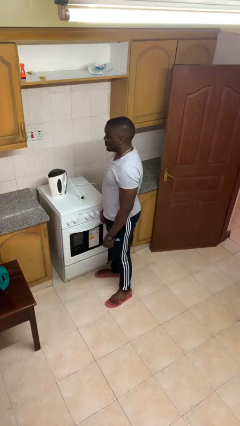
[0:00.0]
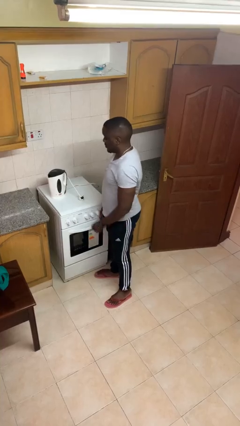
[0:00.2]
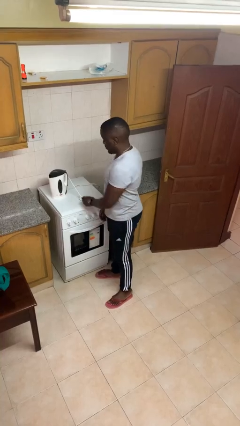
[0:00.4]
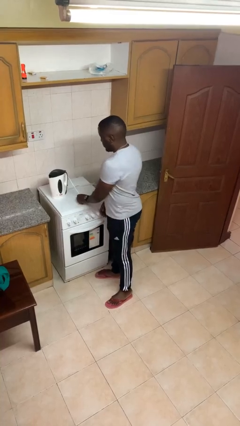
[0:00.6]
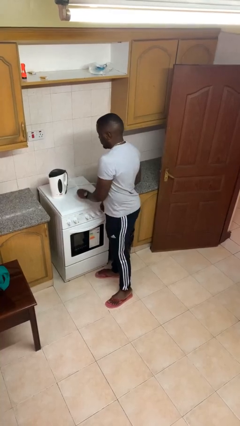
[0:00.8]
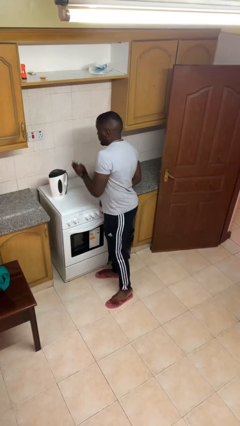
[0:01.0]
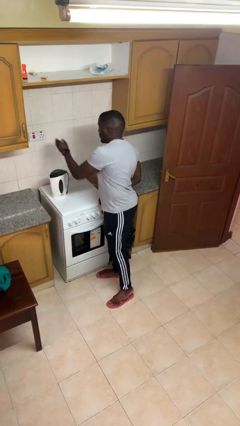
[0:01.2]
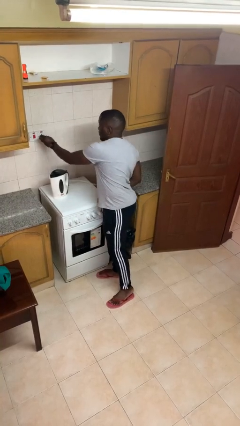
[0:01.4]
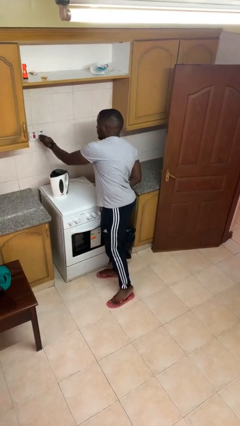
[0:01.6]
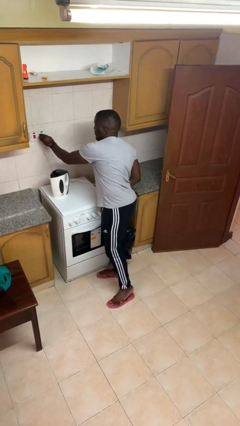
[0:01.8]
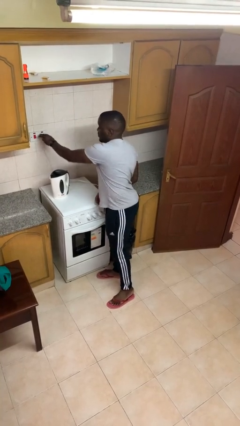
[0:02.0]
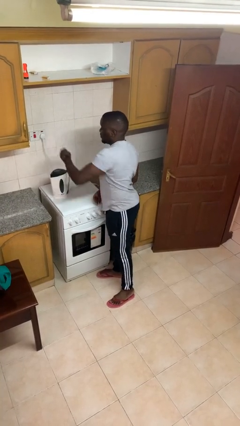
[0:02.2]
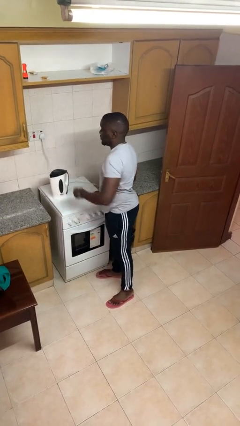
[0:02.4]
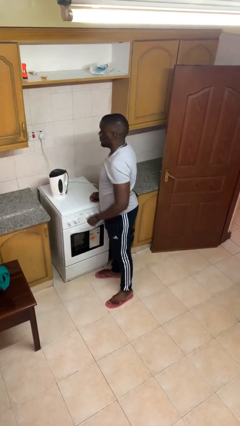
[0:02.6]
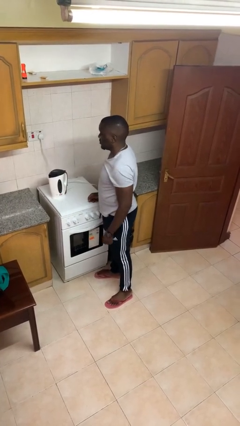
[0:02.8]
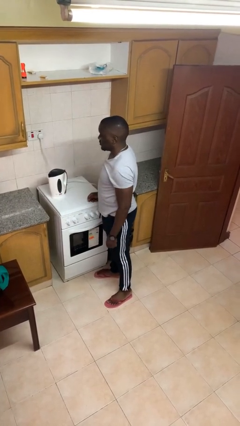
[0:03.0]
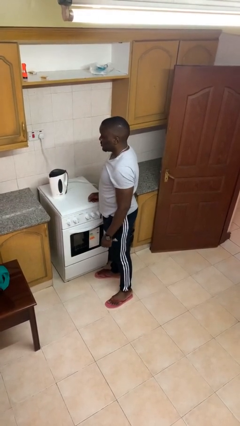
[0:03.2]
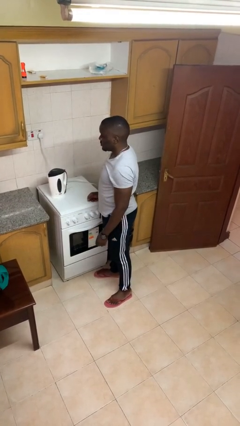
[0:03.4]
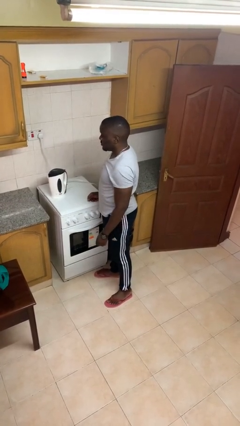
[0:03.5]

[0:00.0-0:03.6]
person plugs into electrical socket

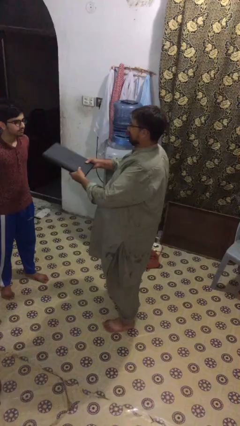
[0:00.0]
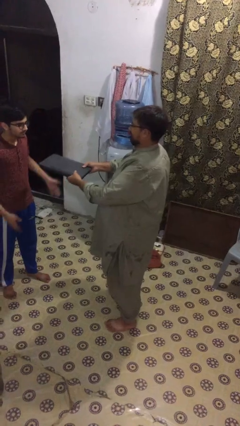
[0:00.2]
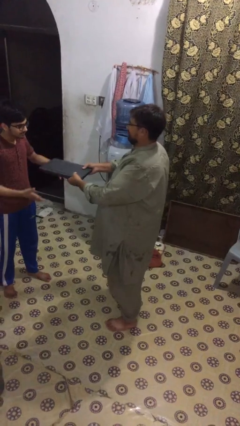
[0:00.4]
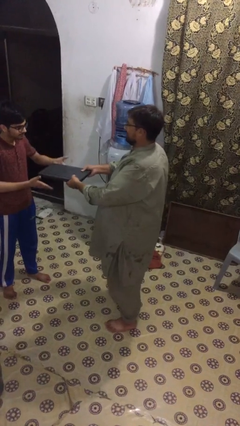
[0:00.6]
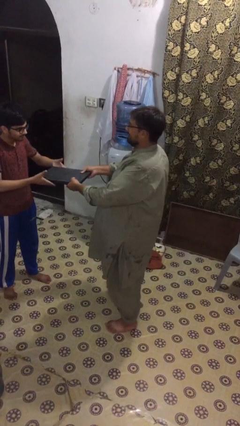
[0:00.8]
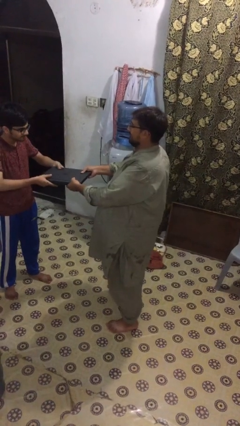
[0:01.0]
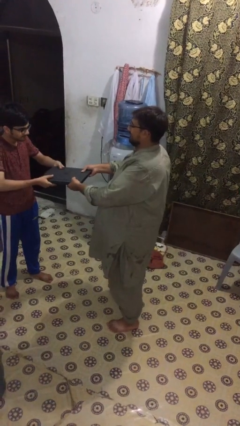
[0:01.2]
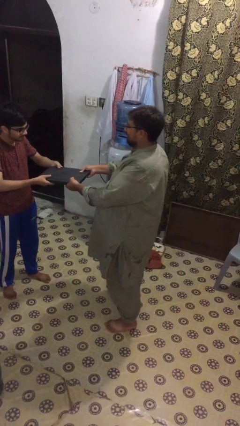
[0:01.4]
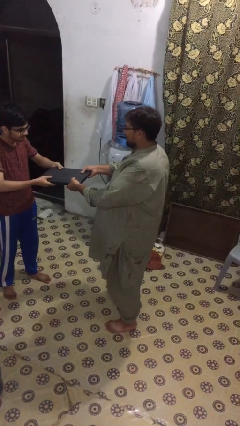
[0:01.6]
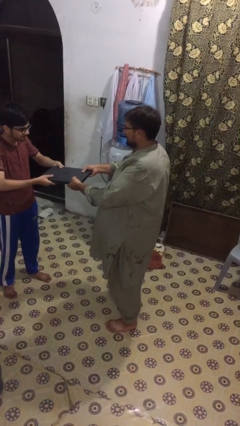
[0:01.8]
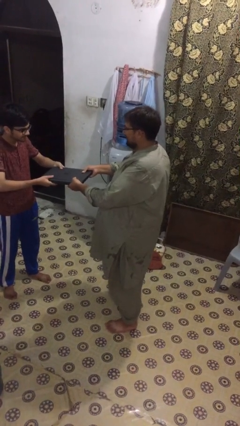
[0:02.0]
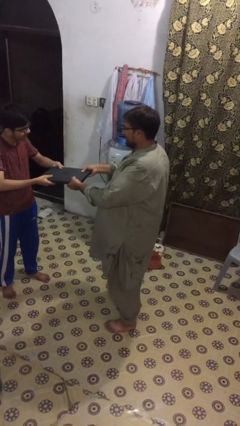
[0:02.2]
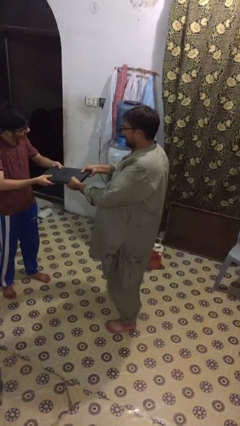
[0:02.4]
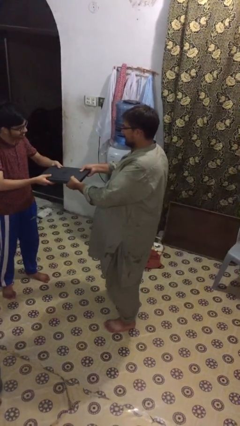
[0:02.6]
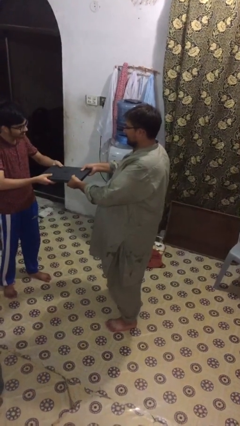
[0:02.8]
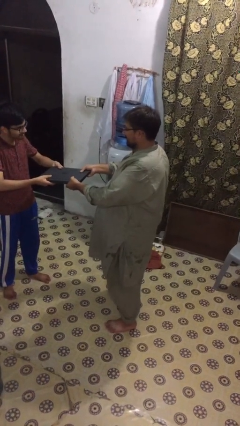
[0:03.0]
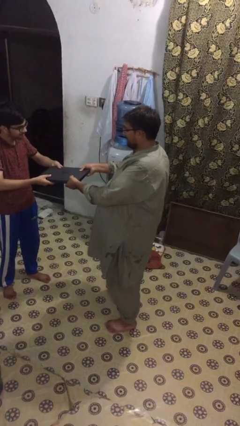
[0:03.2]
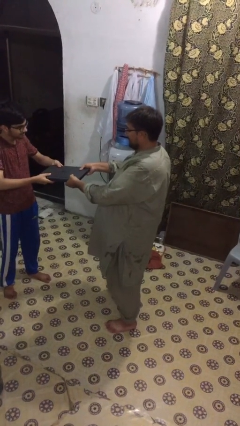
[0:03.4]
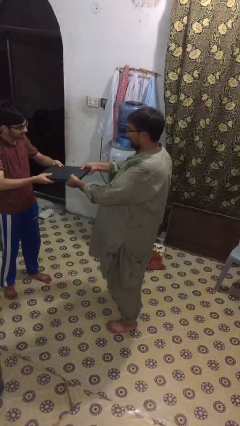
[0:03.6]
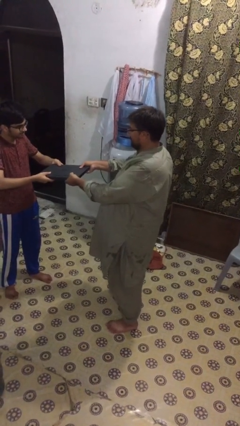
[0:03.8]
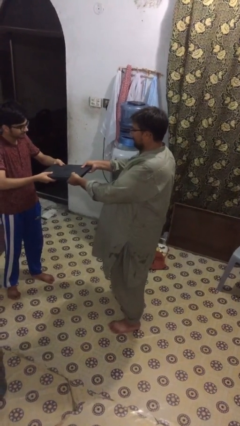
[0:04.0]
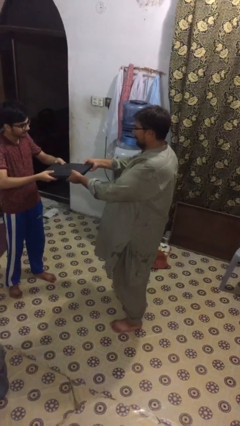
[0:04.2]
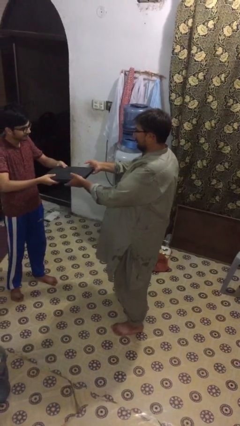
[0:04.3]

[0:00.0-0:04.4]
person transfers object to person

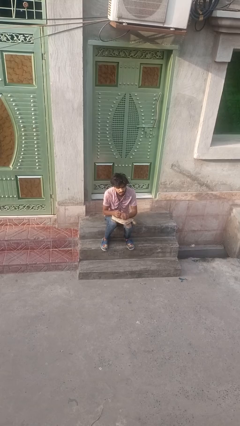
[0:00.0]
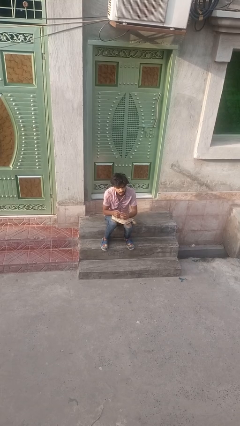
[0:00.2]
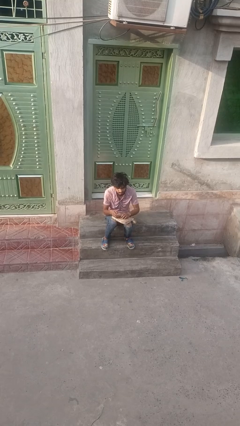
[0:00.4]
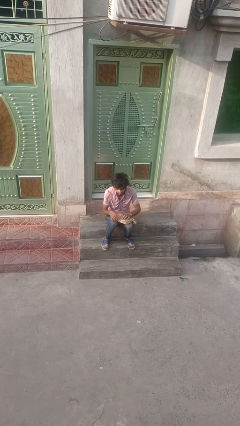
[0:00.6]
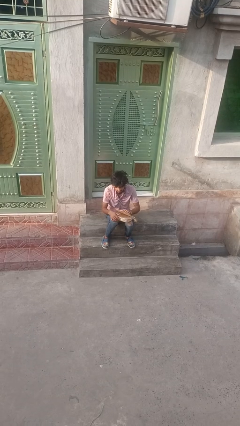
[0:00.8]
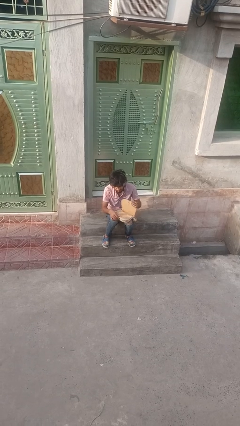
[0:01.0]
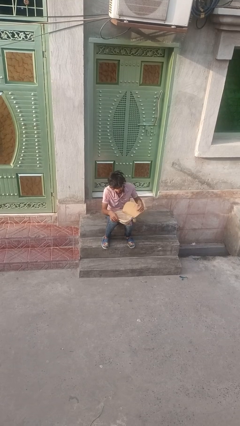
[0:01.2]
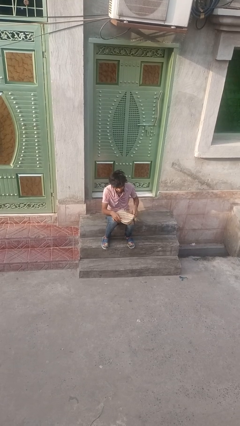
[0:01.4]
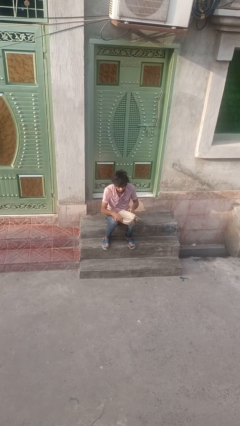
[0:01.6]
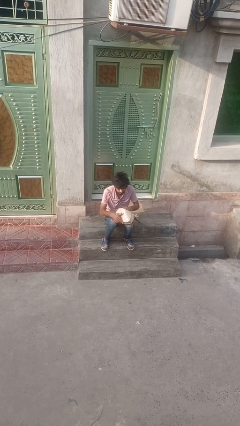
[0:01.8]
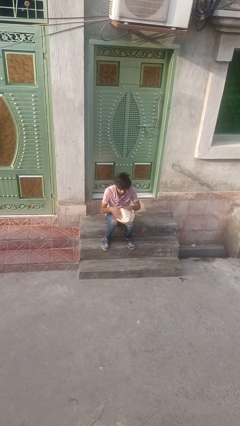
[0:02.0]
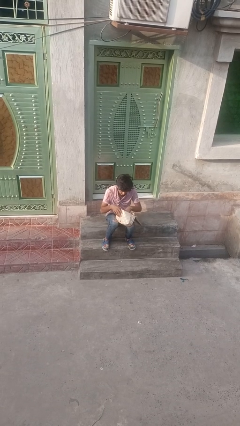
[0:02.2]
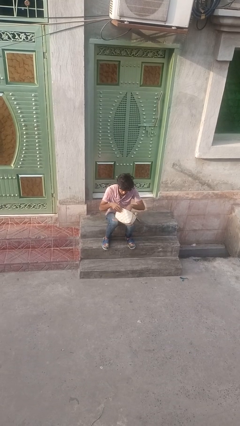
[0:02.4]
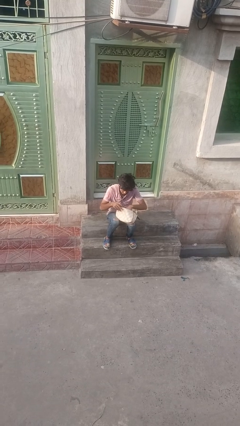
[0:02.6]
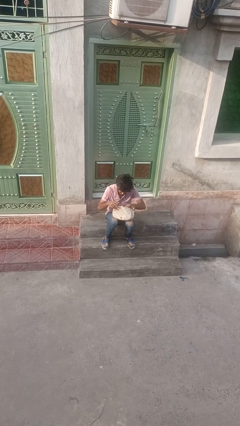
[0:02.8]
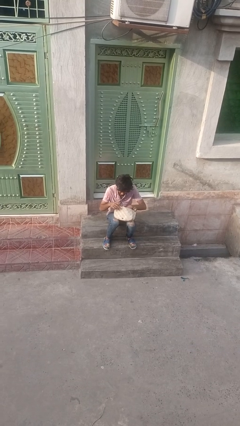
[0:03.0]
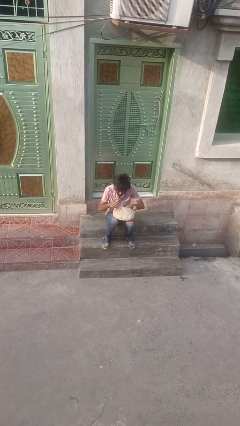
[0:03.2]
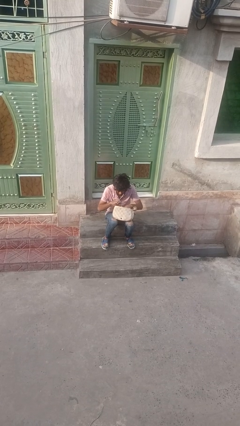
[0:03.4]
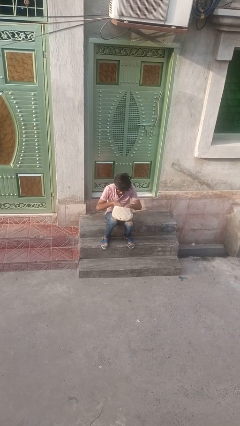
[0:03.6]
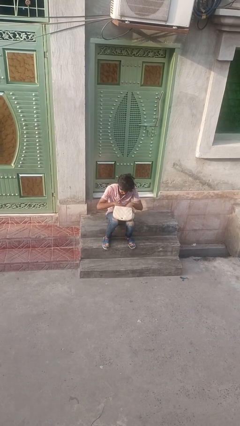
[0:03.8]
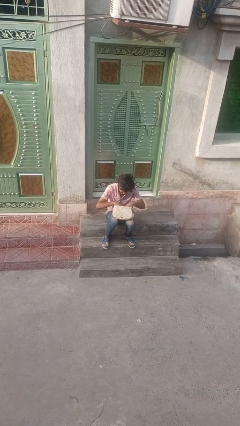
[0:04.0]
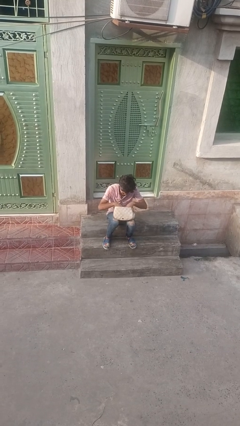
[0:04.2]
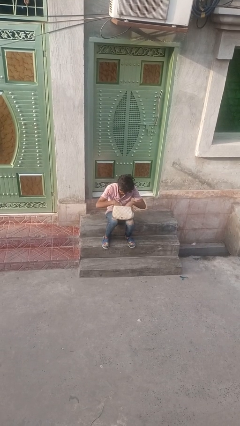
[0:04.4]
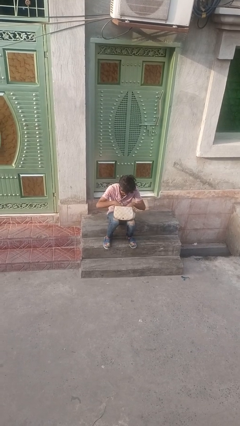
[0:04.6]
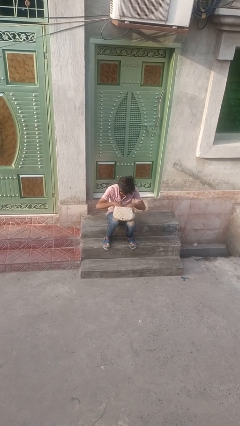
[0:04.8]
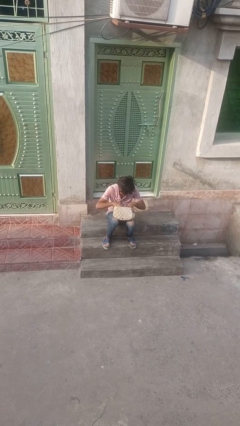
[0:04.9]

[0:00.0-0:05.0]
person searches in backpack

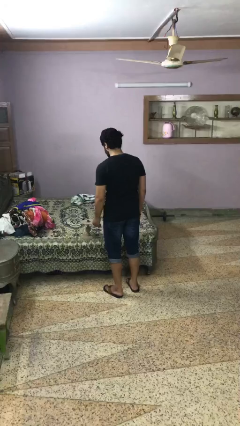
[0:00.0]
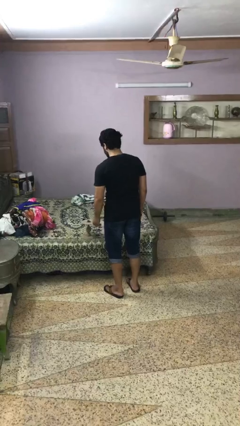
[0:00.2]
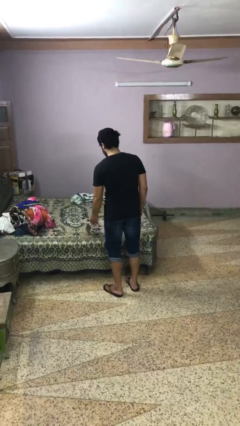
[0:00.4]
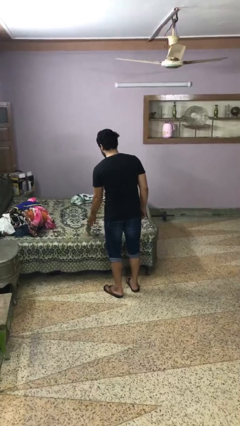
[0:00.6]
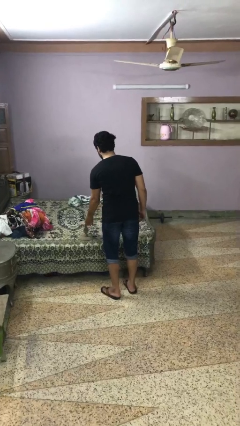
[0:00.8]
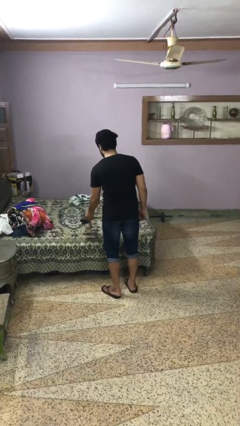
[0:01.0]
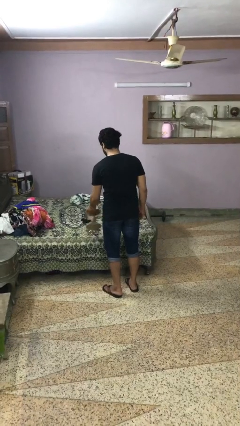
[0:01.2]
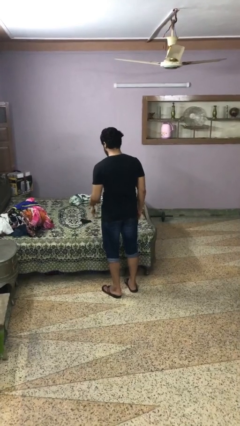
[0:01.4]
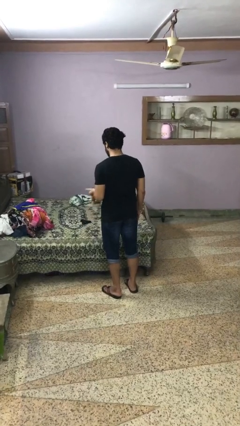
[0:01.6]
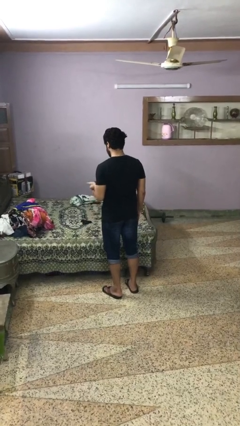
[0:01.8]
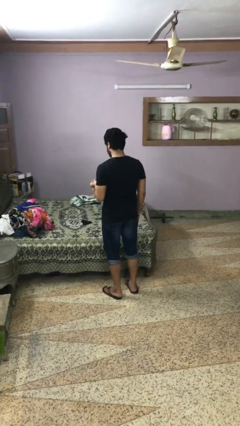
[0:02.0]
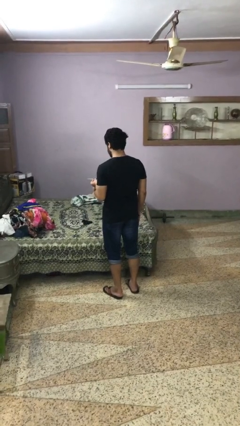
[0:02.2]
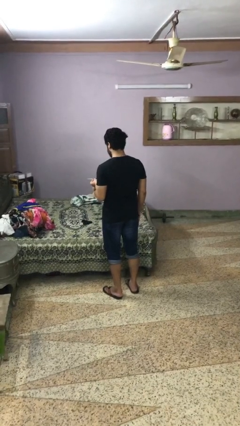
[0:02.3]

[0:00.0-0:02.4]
person picks up object from bed

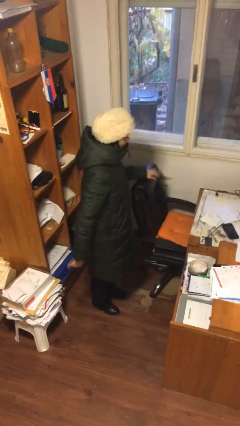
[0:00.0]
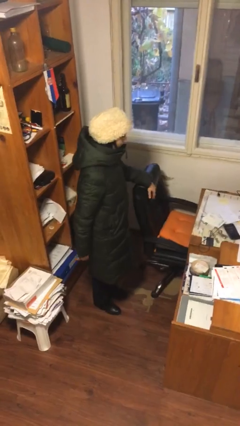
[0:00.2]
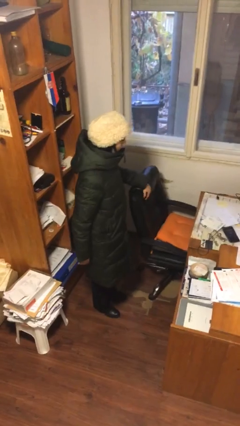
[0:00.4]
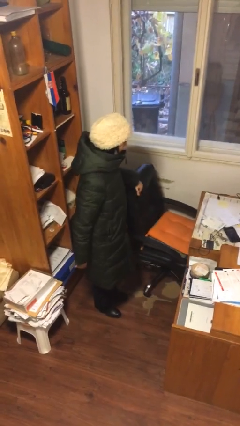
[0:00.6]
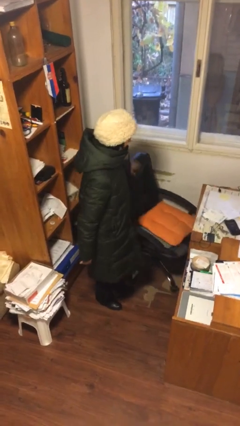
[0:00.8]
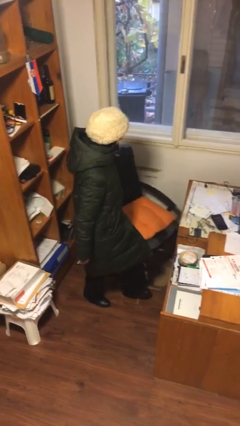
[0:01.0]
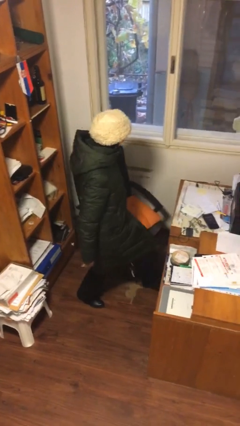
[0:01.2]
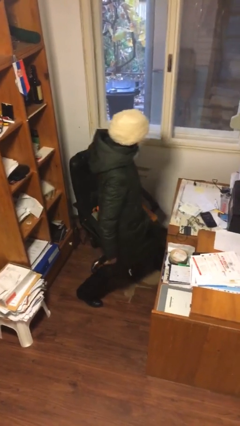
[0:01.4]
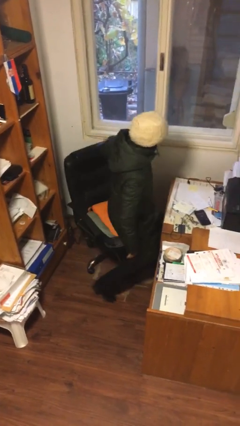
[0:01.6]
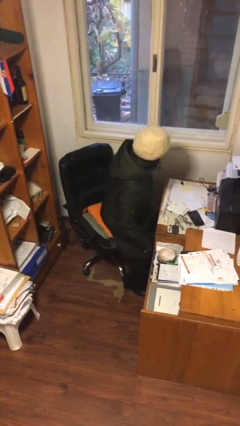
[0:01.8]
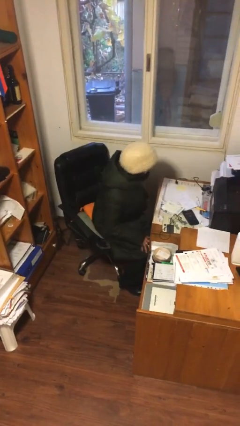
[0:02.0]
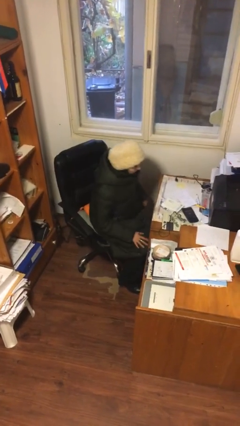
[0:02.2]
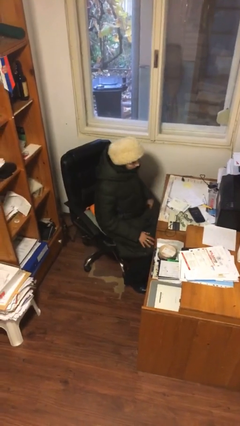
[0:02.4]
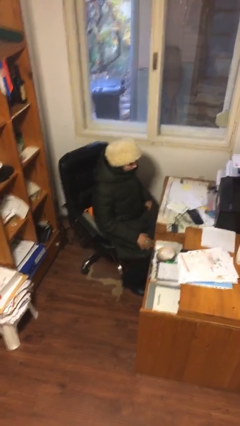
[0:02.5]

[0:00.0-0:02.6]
person sits down
